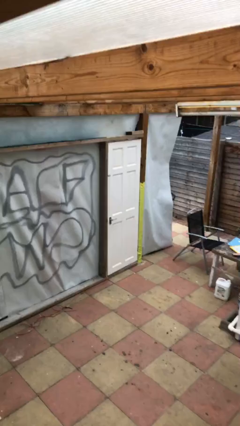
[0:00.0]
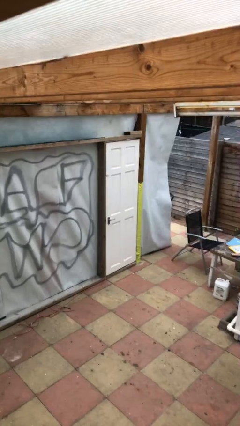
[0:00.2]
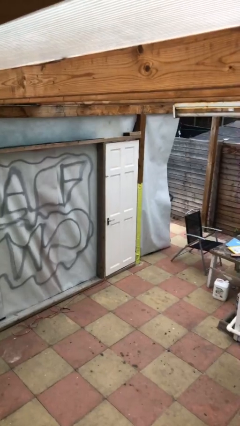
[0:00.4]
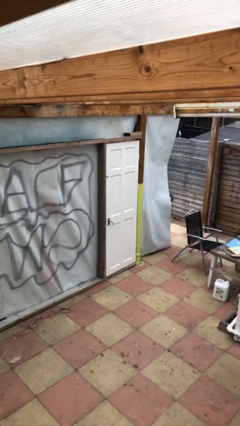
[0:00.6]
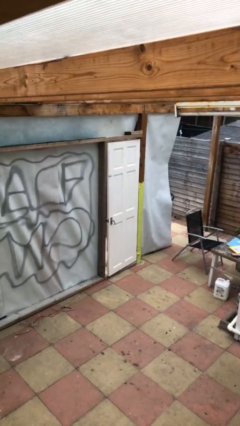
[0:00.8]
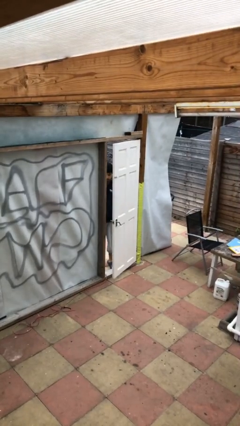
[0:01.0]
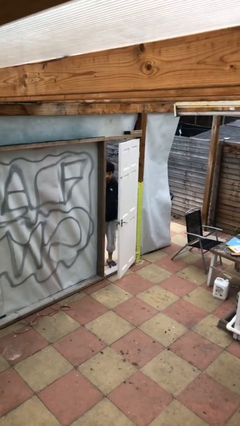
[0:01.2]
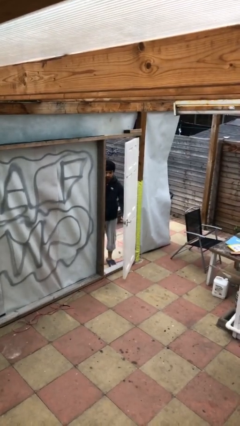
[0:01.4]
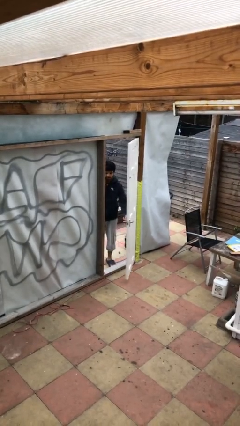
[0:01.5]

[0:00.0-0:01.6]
person opens facility door

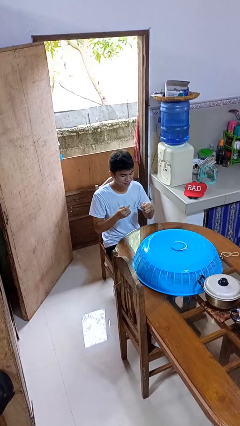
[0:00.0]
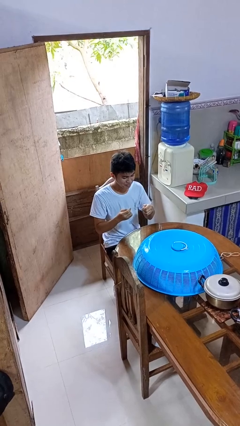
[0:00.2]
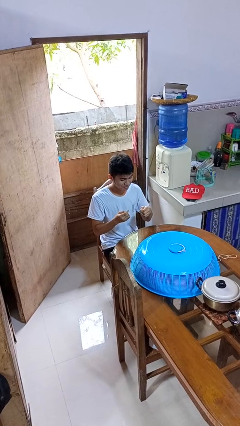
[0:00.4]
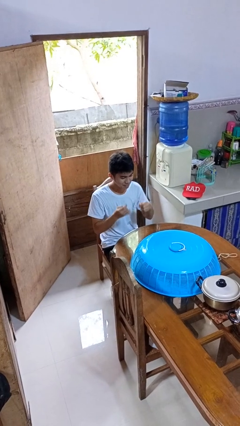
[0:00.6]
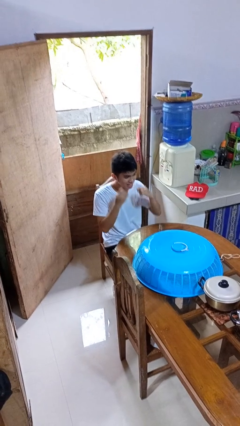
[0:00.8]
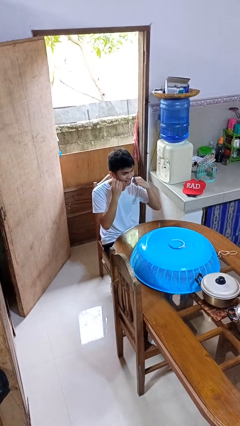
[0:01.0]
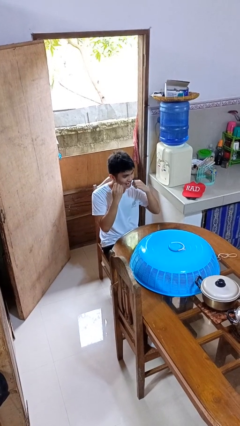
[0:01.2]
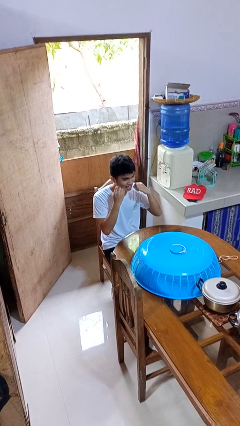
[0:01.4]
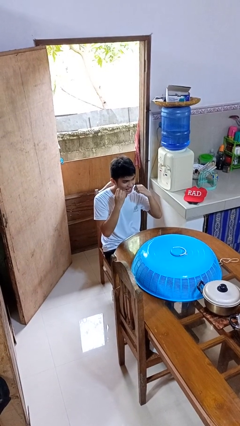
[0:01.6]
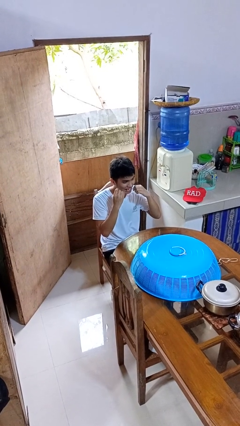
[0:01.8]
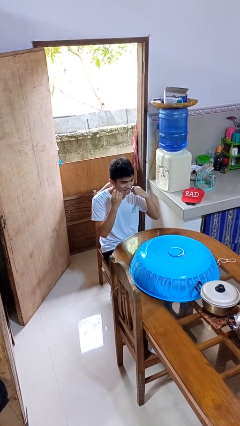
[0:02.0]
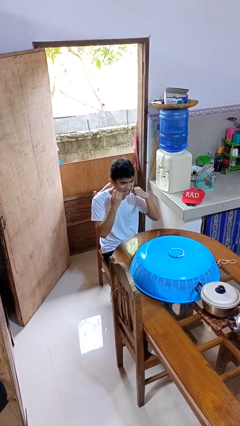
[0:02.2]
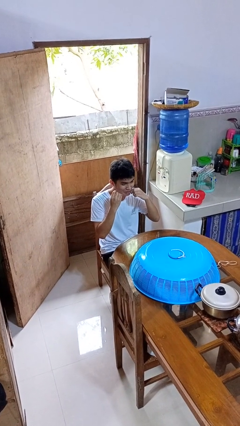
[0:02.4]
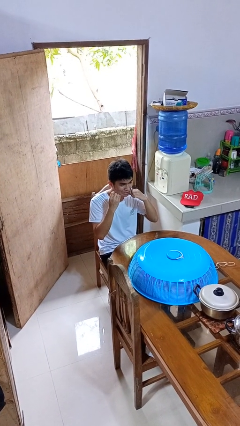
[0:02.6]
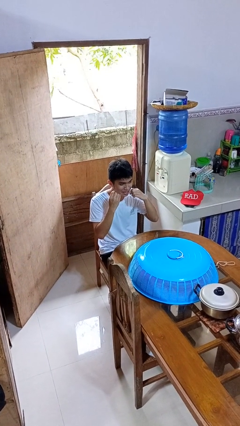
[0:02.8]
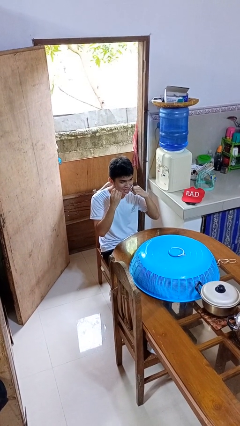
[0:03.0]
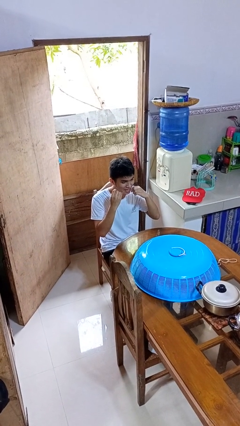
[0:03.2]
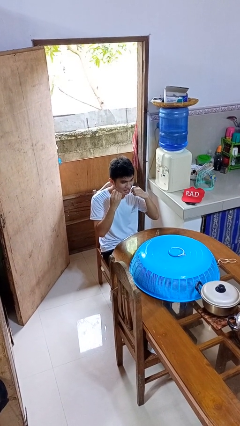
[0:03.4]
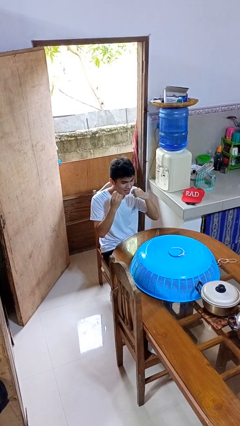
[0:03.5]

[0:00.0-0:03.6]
person flosses

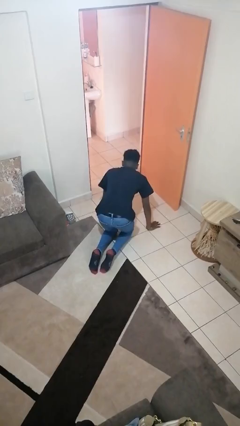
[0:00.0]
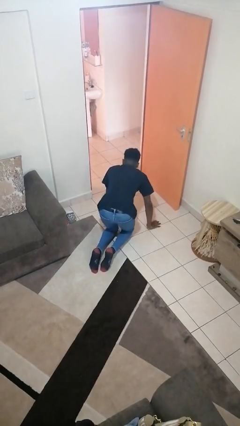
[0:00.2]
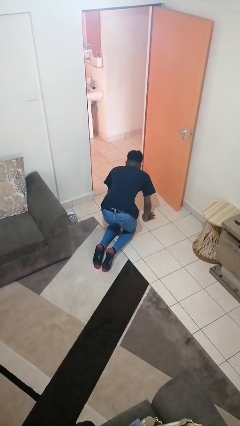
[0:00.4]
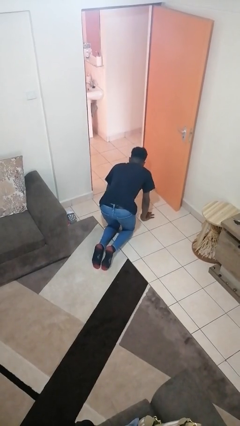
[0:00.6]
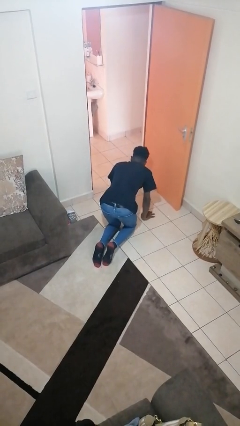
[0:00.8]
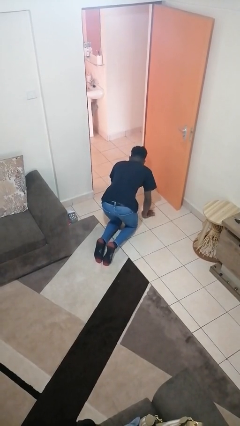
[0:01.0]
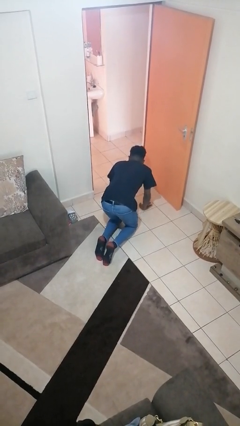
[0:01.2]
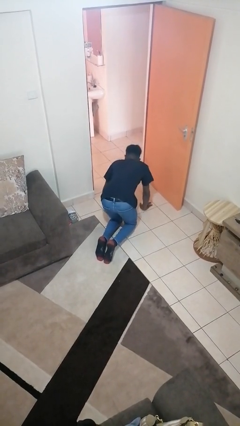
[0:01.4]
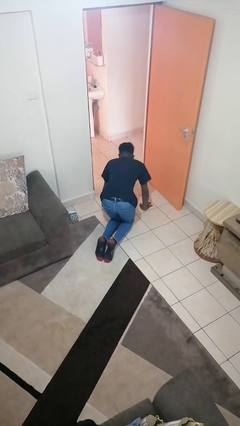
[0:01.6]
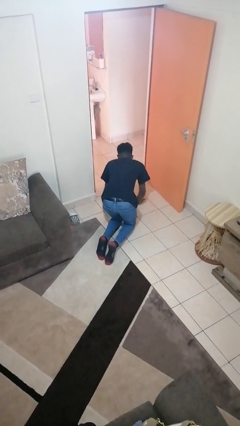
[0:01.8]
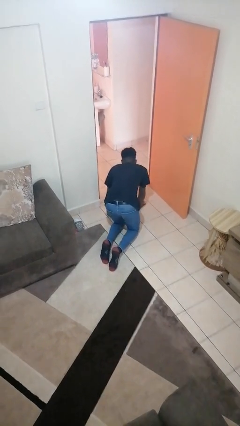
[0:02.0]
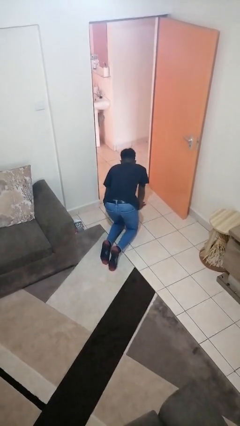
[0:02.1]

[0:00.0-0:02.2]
person crawls

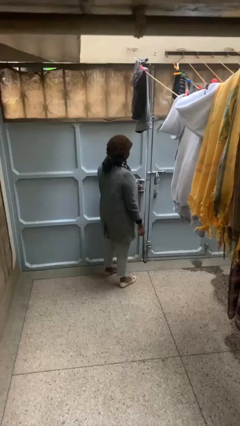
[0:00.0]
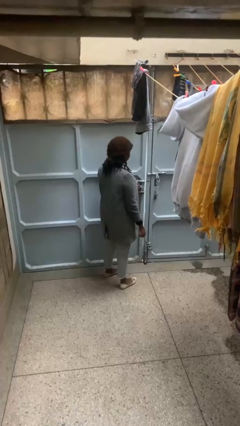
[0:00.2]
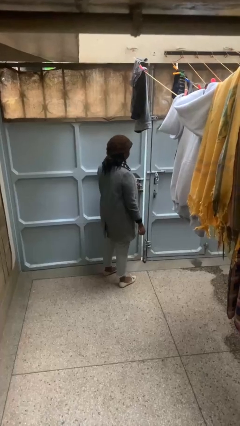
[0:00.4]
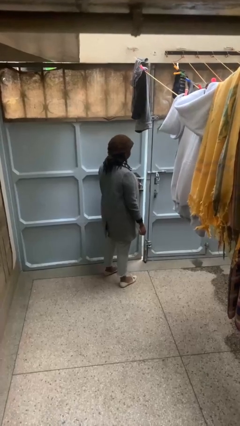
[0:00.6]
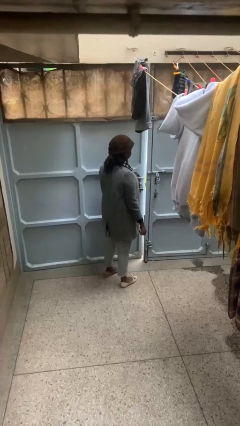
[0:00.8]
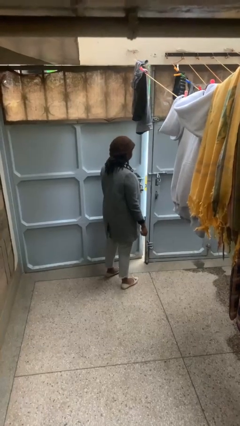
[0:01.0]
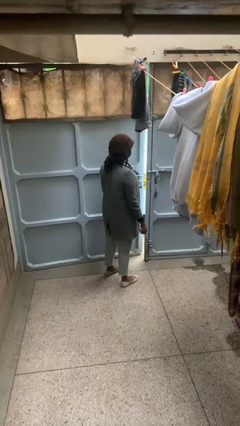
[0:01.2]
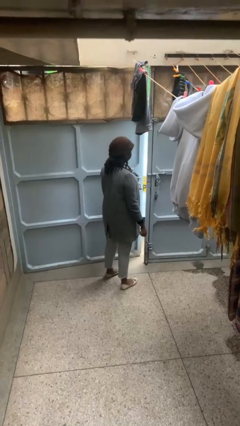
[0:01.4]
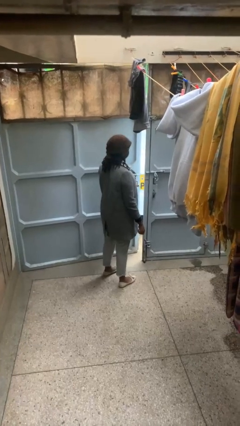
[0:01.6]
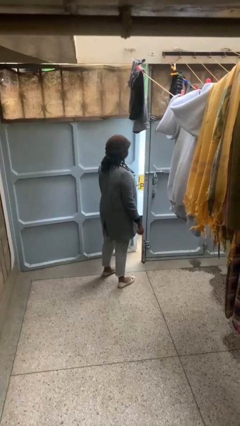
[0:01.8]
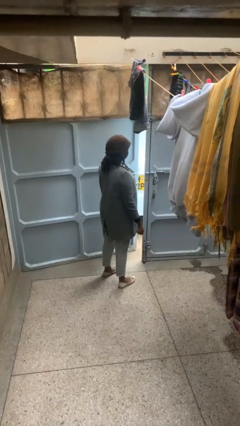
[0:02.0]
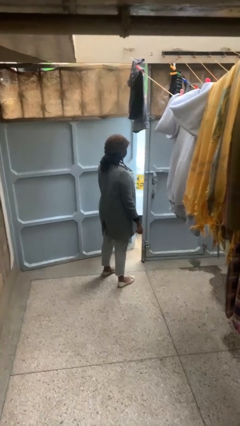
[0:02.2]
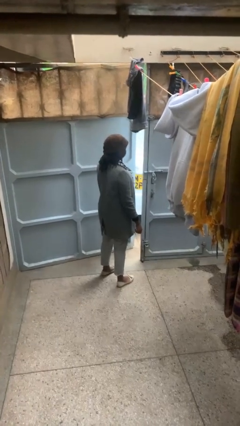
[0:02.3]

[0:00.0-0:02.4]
person opens gate

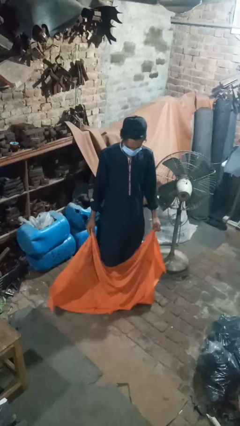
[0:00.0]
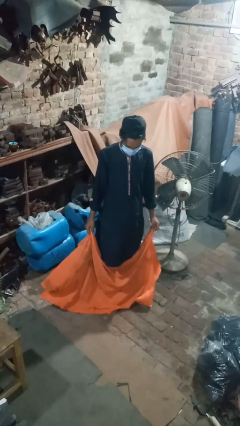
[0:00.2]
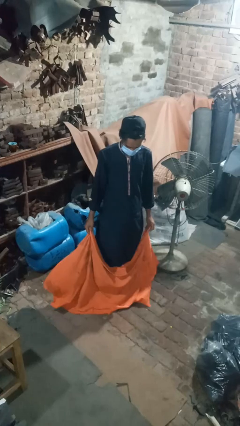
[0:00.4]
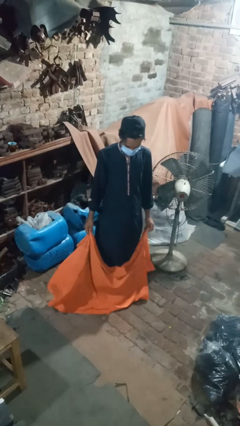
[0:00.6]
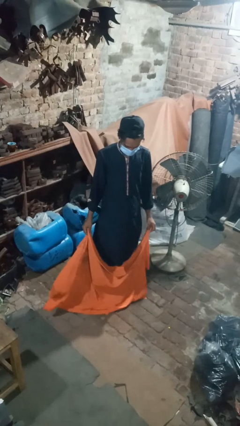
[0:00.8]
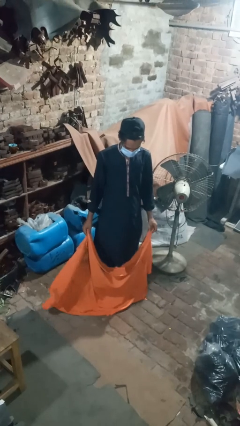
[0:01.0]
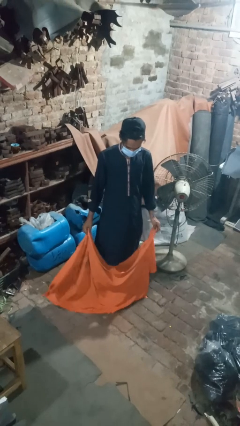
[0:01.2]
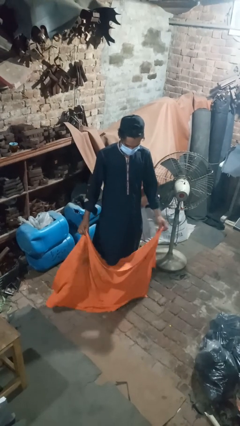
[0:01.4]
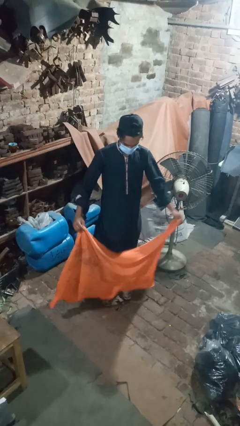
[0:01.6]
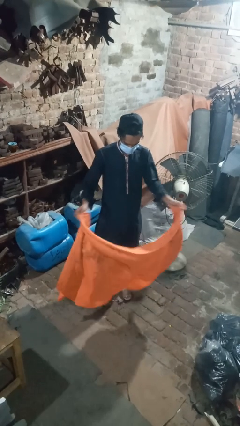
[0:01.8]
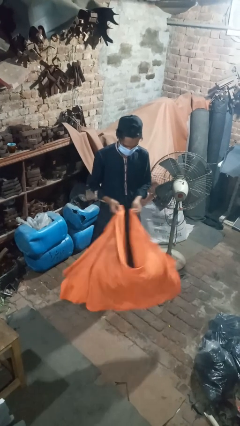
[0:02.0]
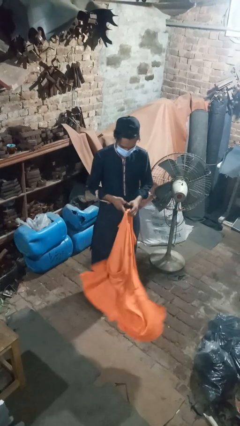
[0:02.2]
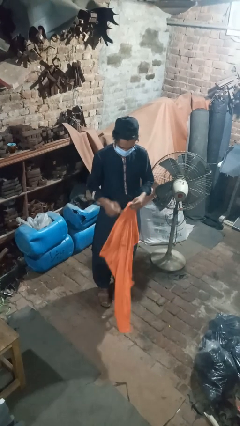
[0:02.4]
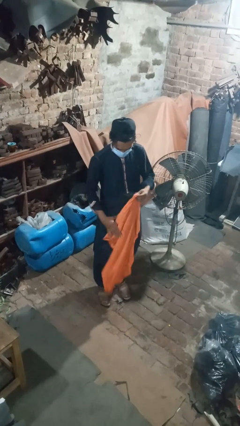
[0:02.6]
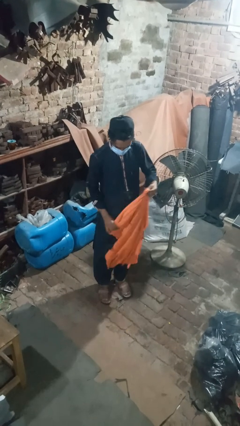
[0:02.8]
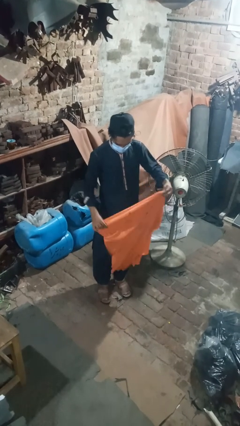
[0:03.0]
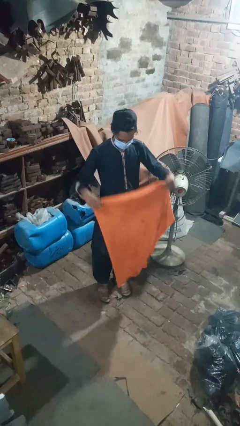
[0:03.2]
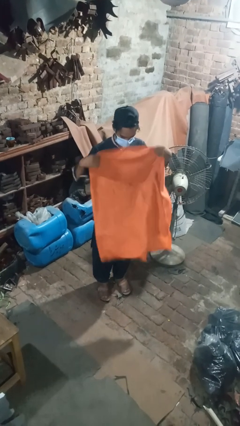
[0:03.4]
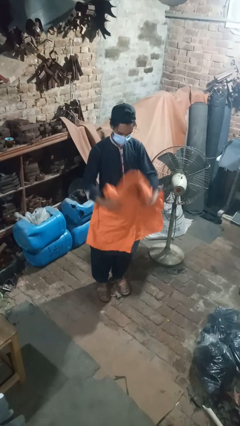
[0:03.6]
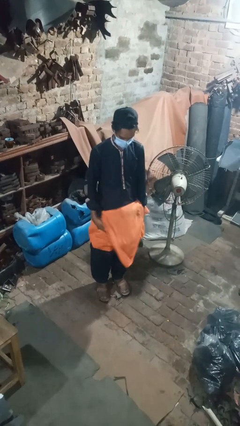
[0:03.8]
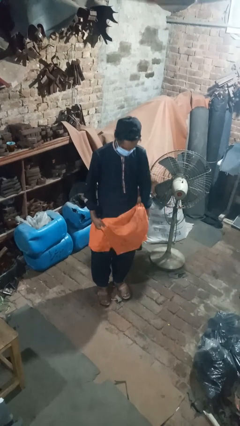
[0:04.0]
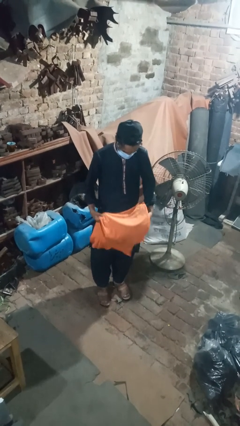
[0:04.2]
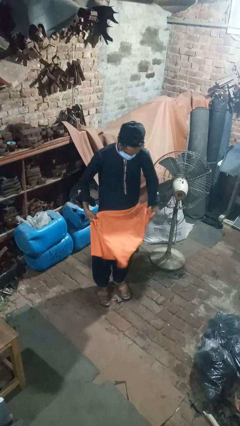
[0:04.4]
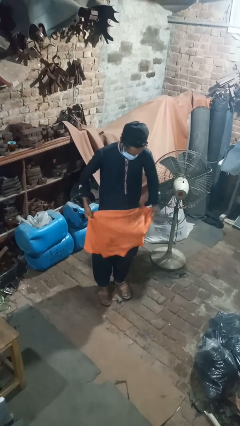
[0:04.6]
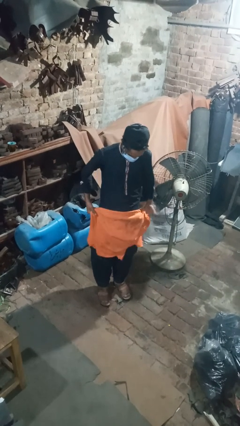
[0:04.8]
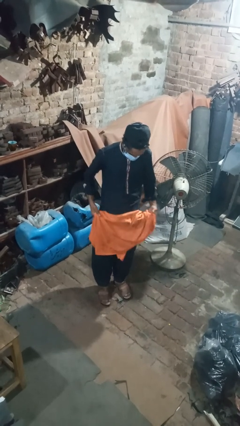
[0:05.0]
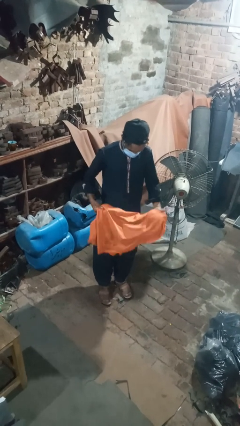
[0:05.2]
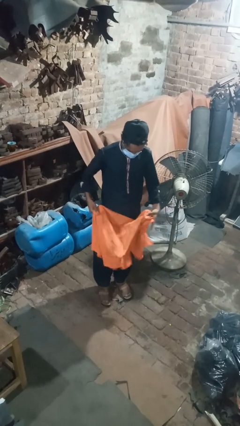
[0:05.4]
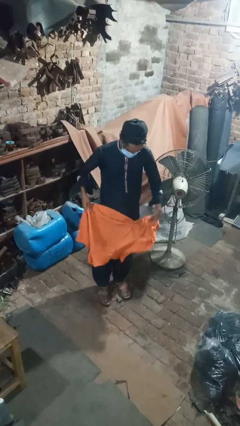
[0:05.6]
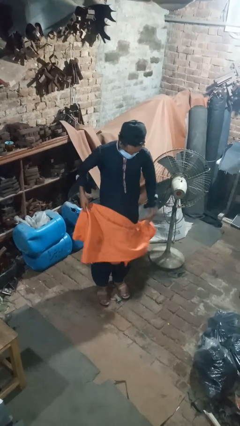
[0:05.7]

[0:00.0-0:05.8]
person folds blanket

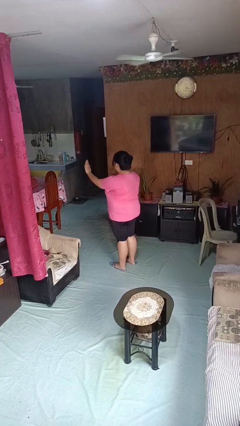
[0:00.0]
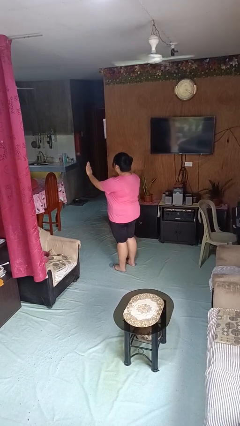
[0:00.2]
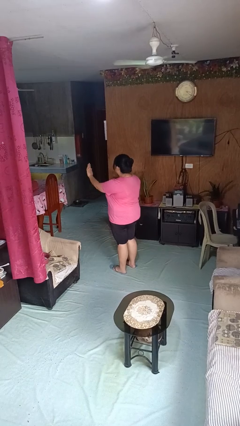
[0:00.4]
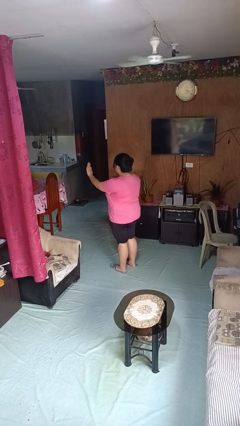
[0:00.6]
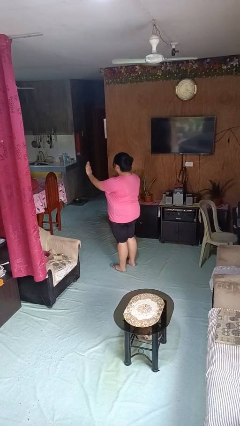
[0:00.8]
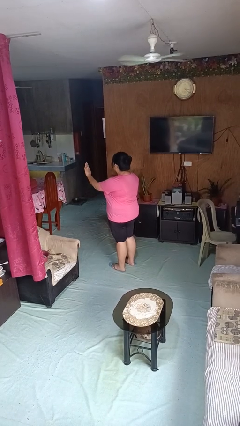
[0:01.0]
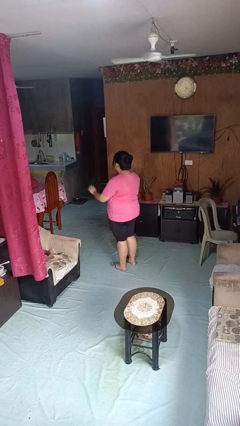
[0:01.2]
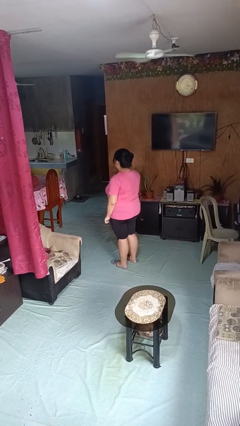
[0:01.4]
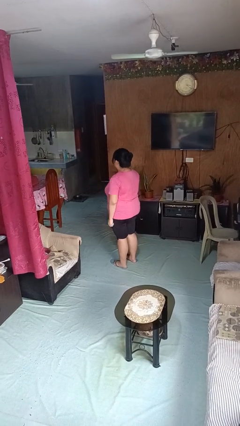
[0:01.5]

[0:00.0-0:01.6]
person gestures stop
